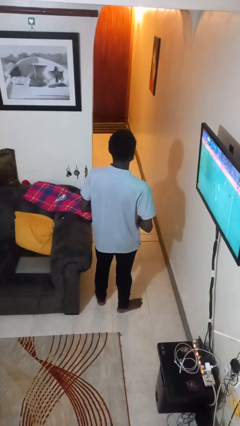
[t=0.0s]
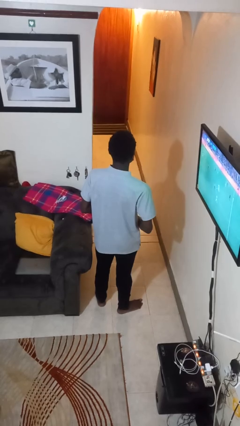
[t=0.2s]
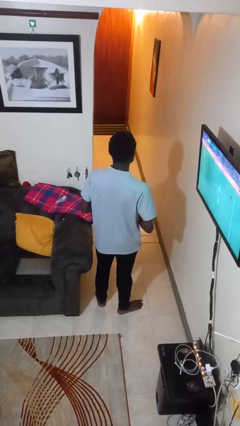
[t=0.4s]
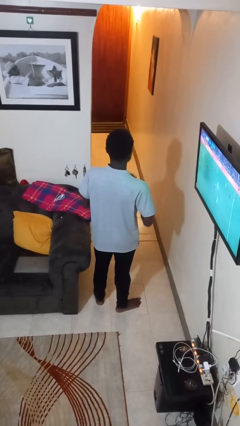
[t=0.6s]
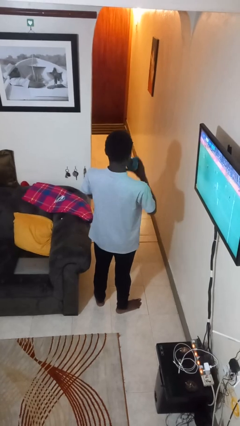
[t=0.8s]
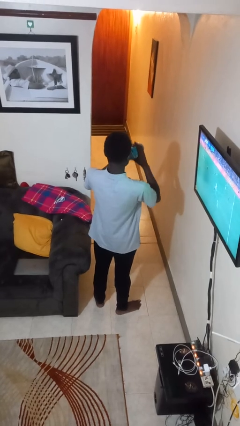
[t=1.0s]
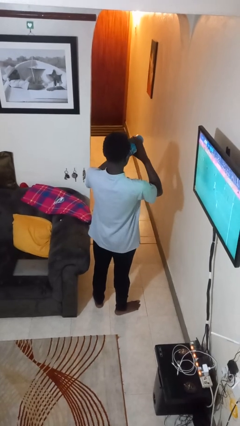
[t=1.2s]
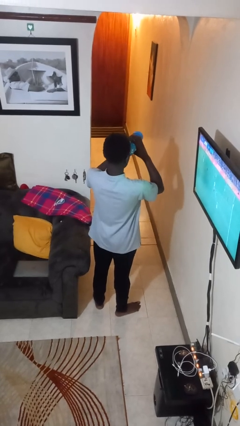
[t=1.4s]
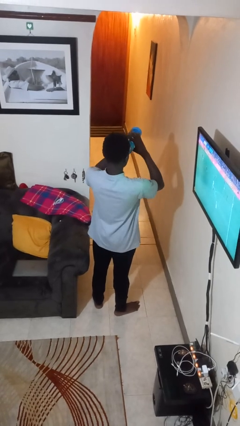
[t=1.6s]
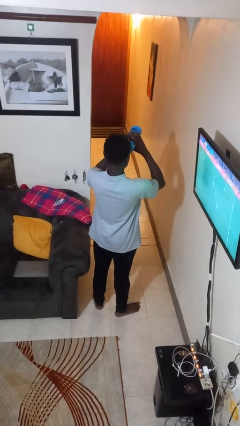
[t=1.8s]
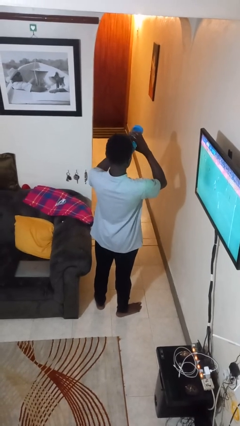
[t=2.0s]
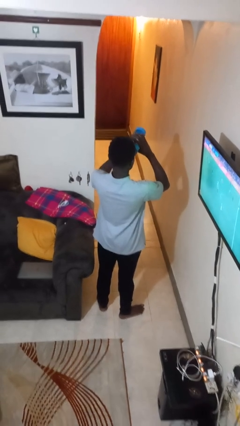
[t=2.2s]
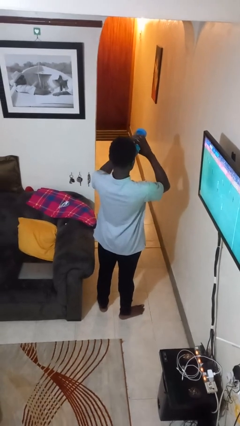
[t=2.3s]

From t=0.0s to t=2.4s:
person drinks from bottle

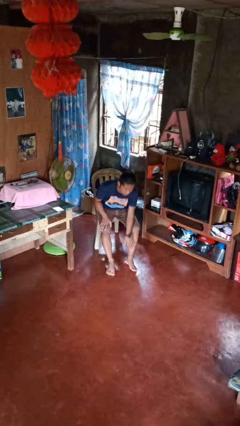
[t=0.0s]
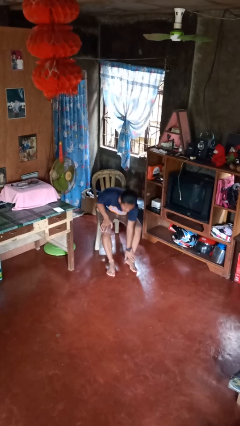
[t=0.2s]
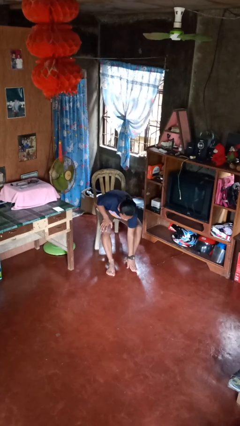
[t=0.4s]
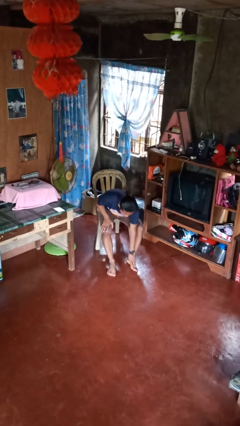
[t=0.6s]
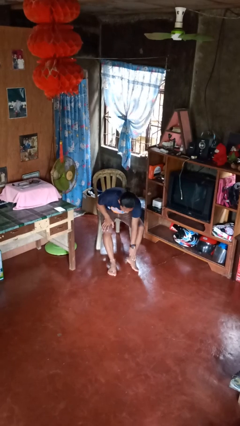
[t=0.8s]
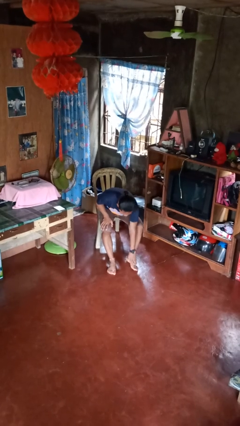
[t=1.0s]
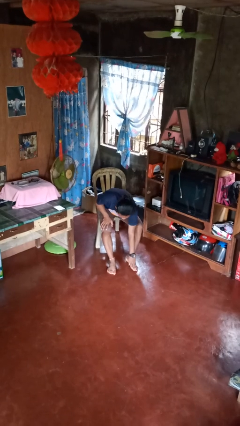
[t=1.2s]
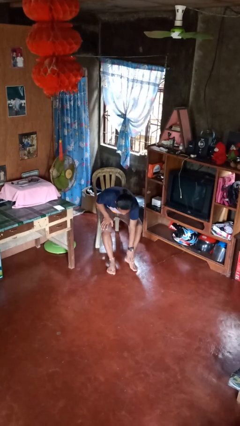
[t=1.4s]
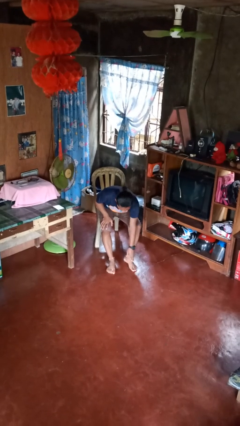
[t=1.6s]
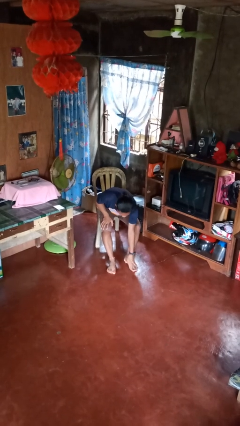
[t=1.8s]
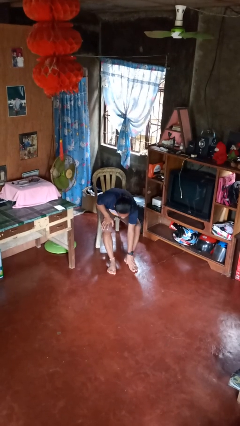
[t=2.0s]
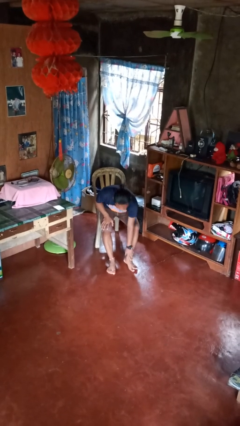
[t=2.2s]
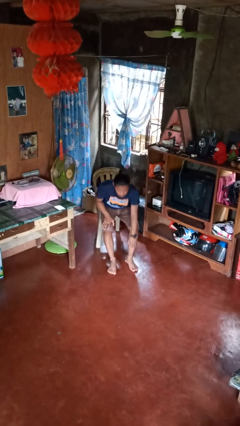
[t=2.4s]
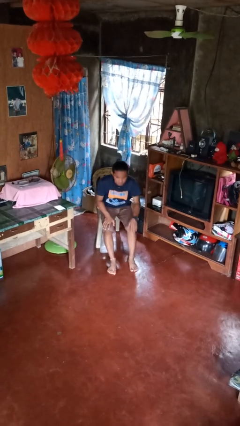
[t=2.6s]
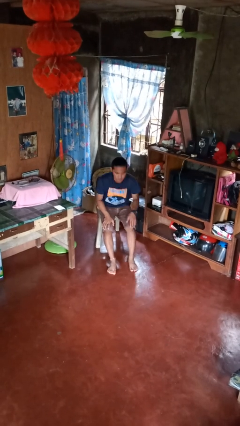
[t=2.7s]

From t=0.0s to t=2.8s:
person rubs foot

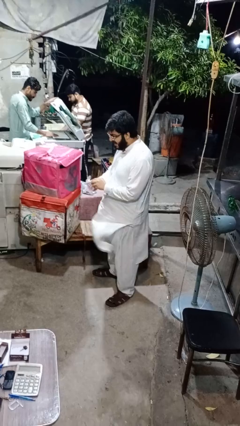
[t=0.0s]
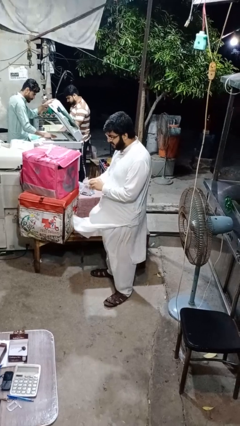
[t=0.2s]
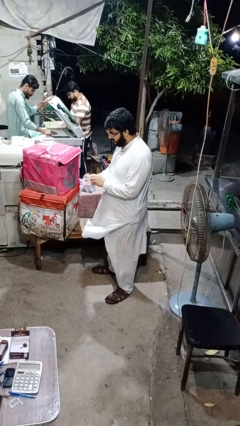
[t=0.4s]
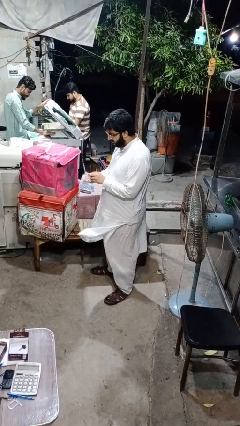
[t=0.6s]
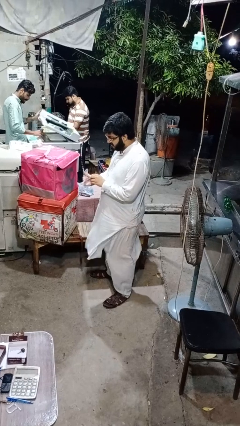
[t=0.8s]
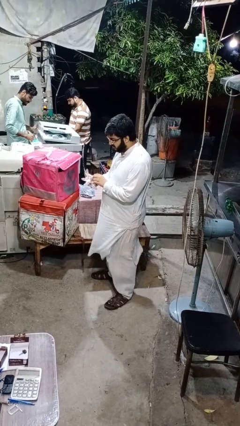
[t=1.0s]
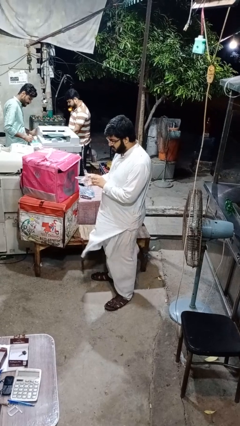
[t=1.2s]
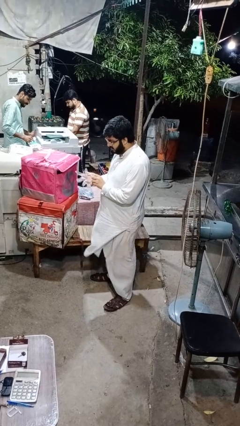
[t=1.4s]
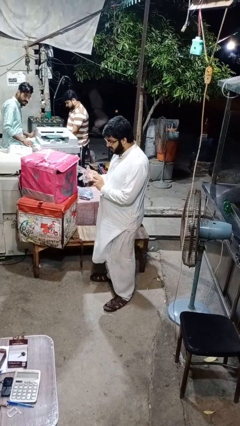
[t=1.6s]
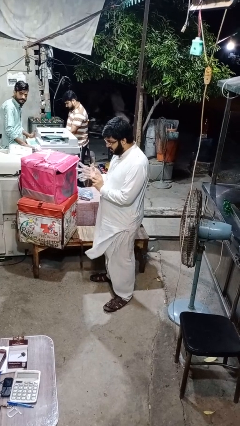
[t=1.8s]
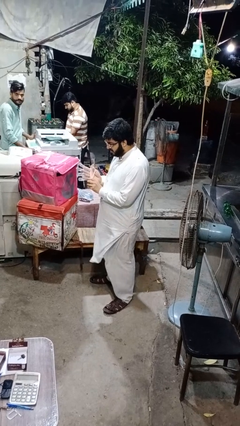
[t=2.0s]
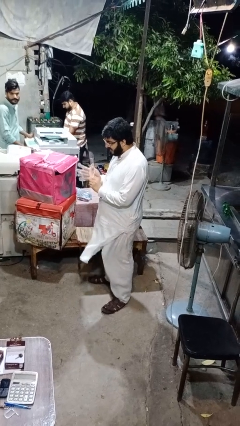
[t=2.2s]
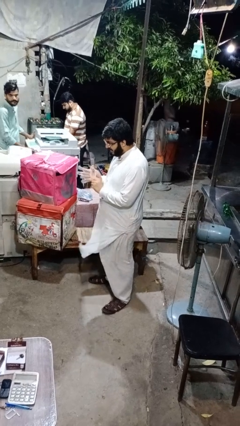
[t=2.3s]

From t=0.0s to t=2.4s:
person puts on gloves

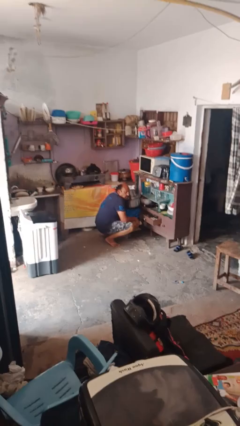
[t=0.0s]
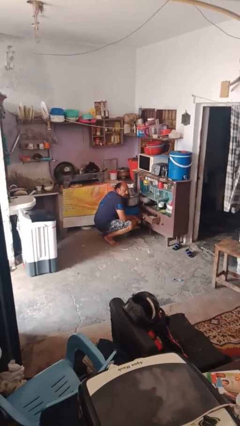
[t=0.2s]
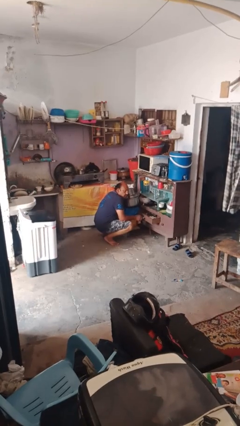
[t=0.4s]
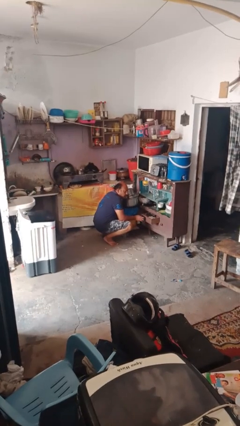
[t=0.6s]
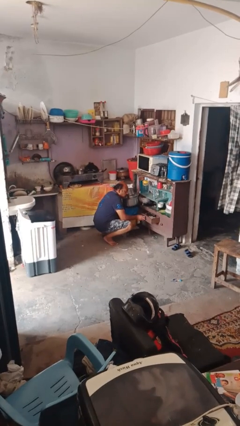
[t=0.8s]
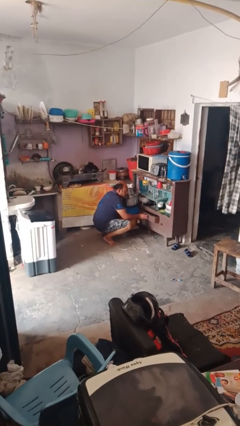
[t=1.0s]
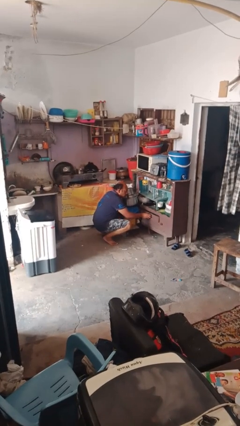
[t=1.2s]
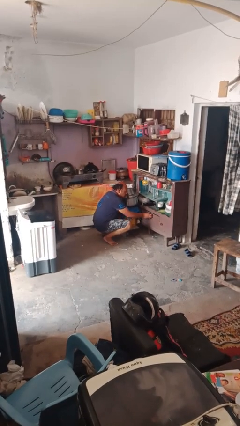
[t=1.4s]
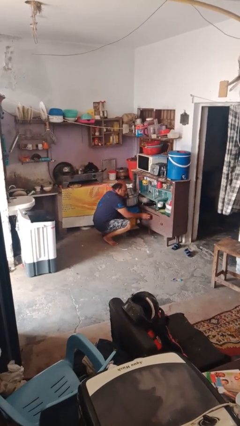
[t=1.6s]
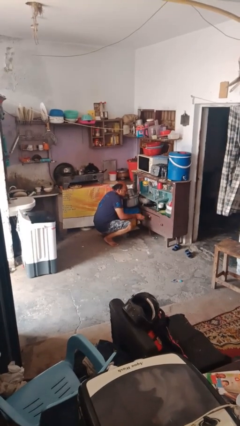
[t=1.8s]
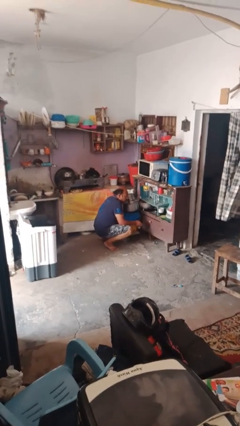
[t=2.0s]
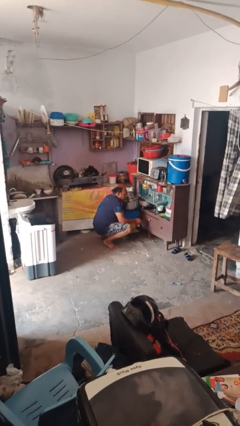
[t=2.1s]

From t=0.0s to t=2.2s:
person closes kitchen drawer

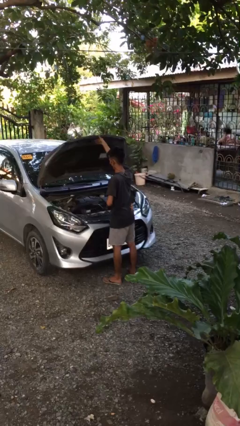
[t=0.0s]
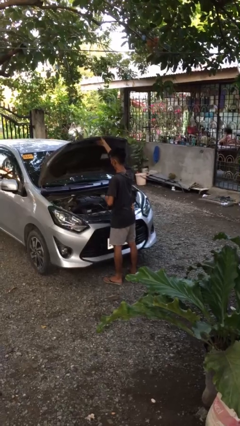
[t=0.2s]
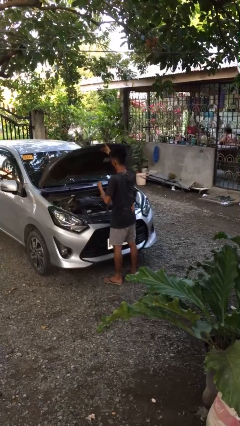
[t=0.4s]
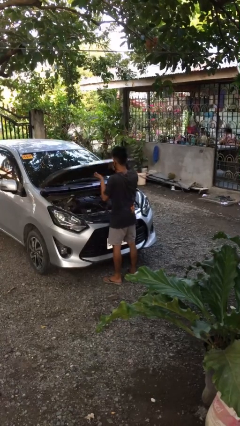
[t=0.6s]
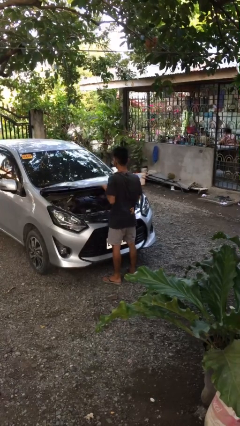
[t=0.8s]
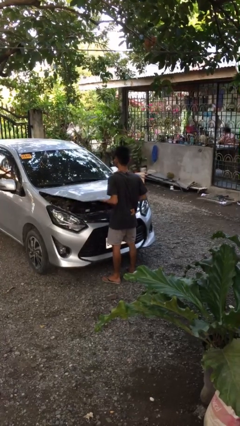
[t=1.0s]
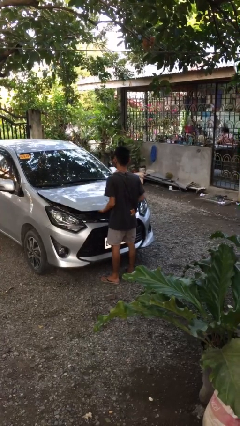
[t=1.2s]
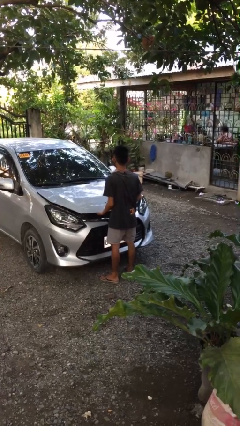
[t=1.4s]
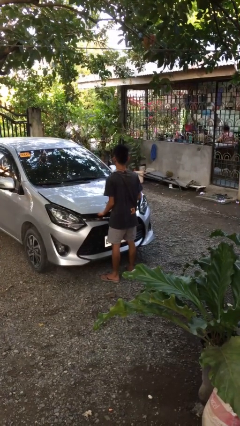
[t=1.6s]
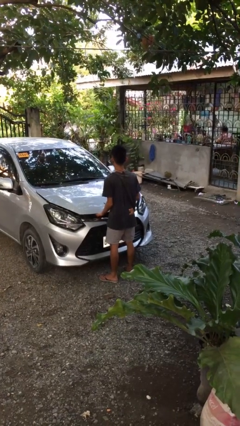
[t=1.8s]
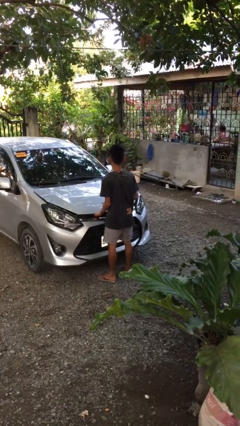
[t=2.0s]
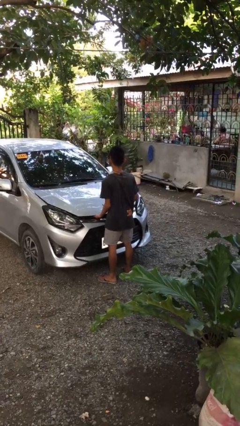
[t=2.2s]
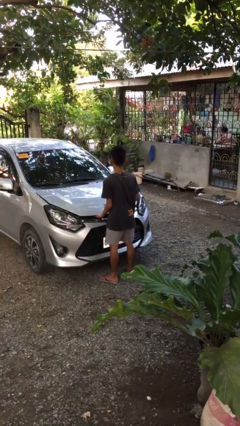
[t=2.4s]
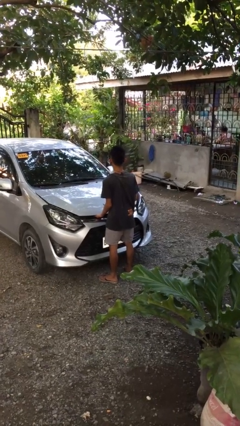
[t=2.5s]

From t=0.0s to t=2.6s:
person closes car hood

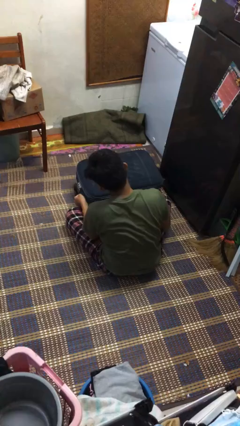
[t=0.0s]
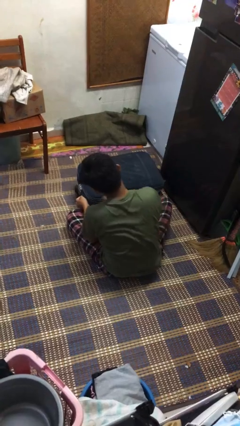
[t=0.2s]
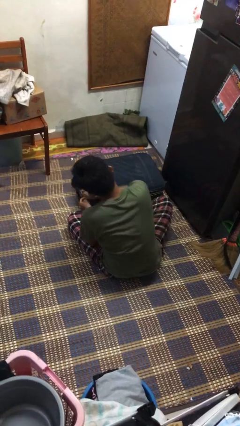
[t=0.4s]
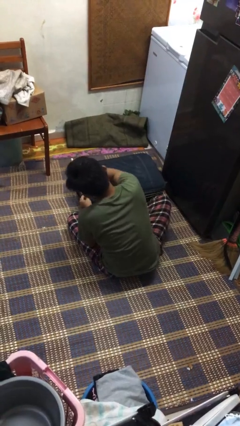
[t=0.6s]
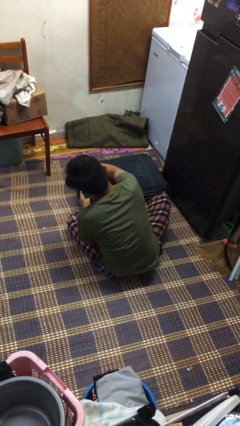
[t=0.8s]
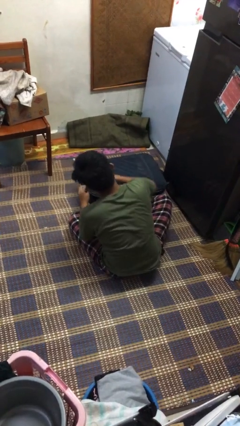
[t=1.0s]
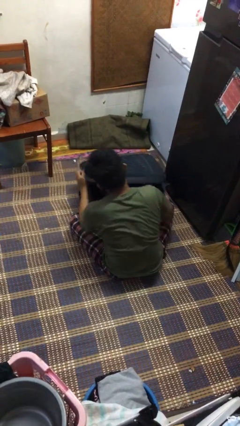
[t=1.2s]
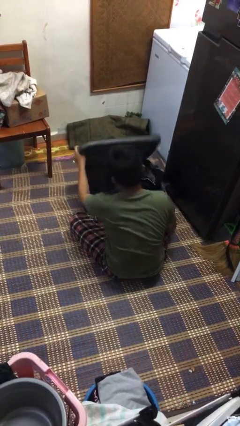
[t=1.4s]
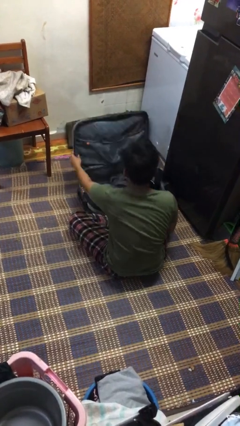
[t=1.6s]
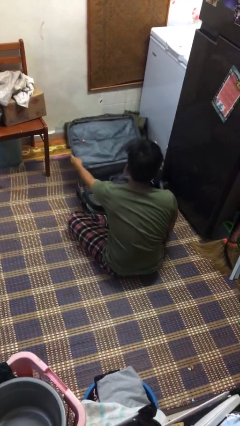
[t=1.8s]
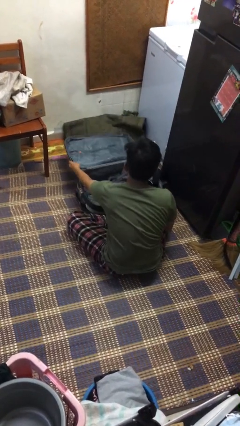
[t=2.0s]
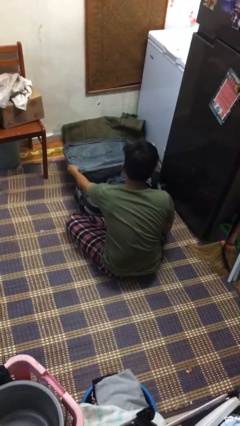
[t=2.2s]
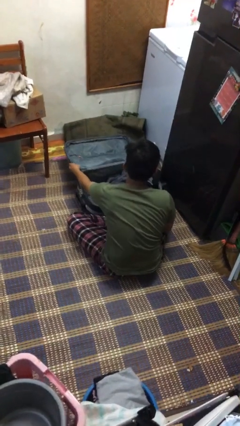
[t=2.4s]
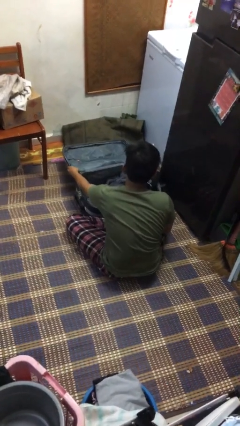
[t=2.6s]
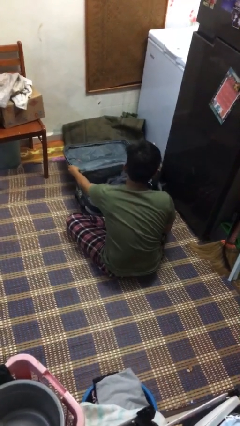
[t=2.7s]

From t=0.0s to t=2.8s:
person opens suitcase

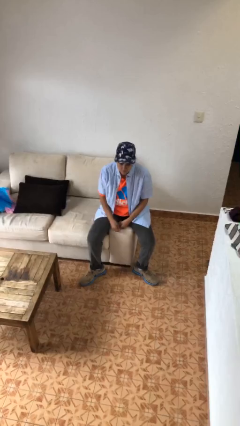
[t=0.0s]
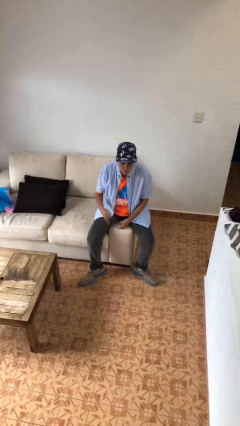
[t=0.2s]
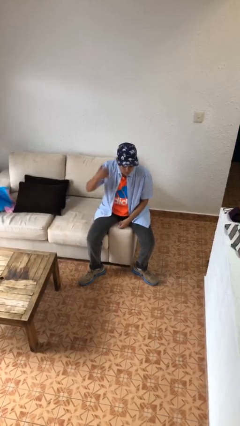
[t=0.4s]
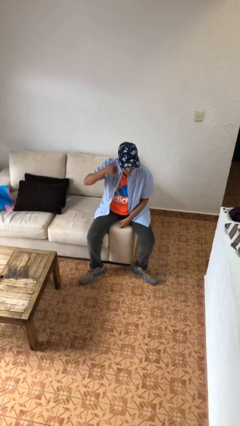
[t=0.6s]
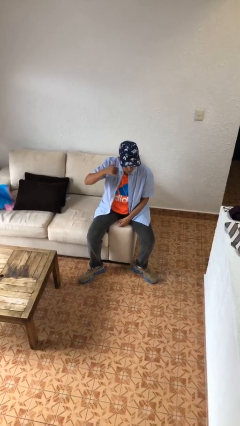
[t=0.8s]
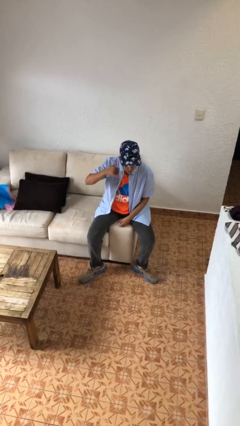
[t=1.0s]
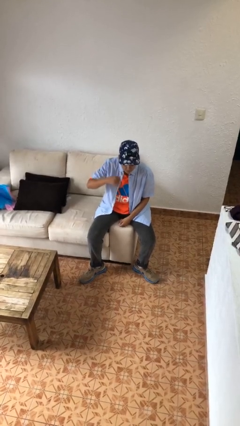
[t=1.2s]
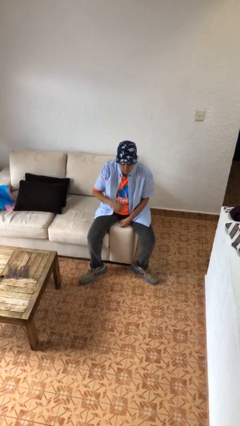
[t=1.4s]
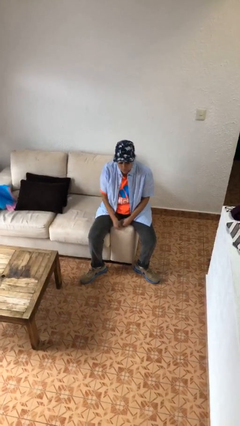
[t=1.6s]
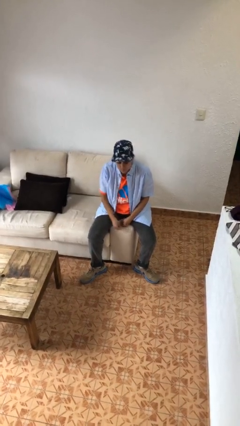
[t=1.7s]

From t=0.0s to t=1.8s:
person gestures call me

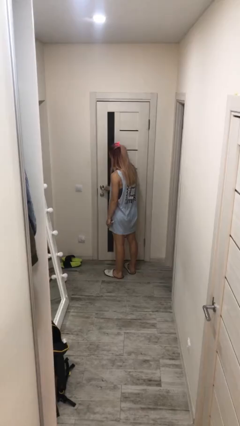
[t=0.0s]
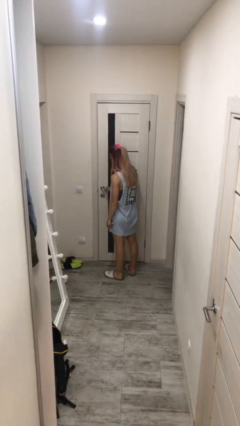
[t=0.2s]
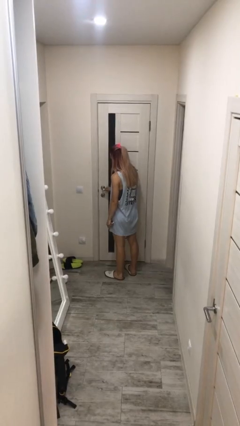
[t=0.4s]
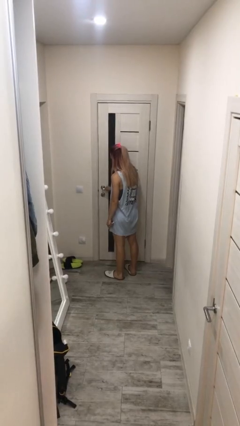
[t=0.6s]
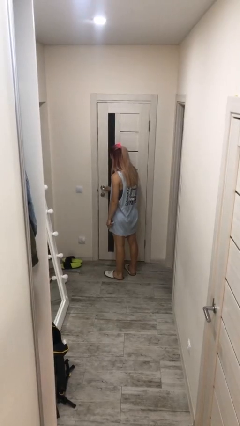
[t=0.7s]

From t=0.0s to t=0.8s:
person closes facility door
